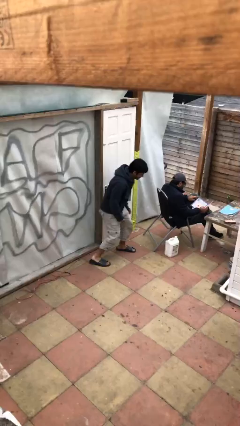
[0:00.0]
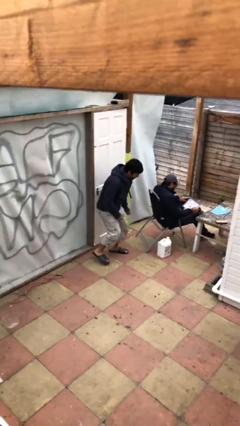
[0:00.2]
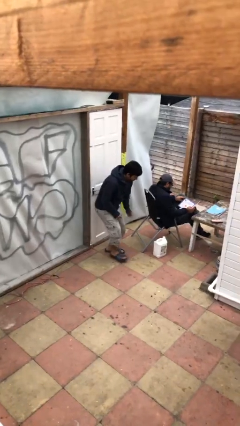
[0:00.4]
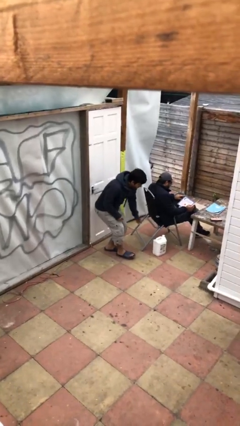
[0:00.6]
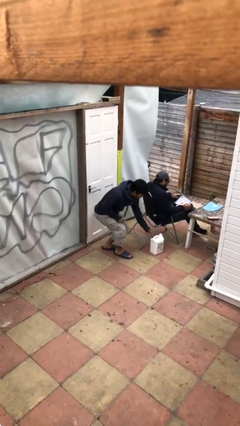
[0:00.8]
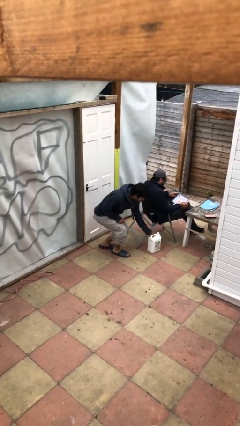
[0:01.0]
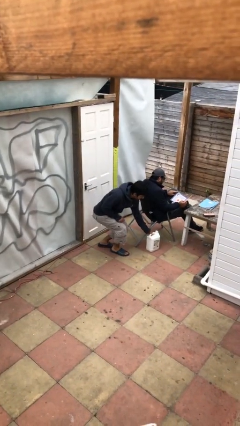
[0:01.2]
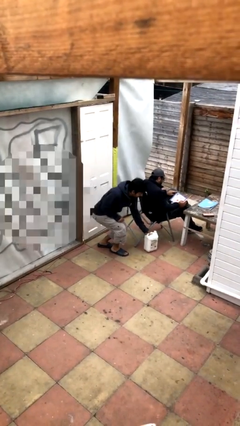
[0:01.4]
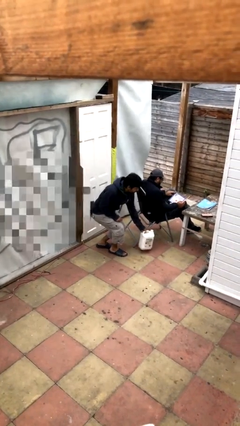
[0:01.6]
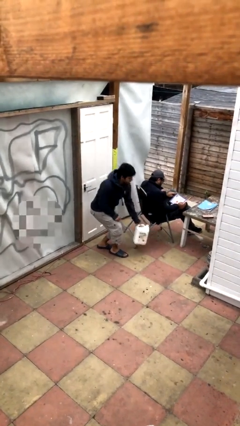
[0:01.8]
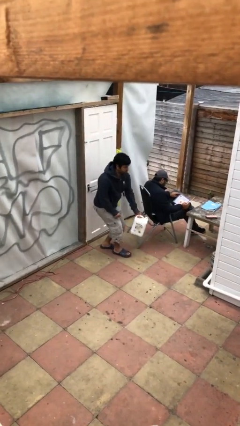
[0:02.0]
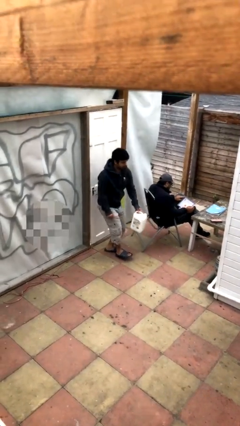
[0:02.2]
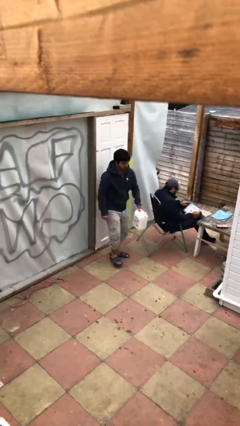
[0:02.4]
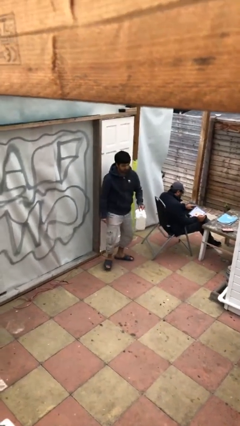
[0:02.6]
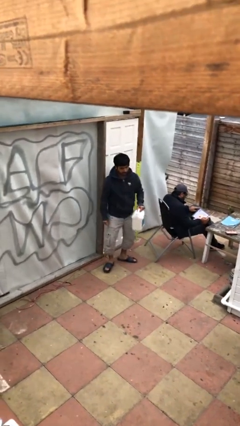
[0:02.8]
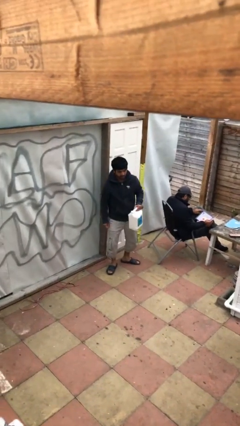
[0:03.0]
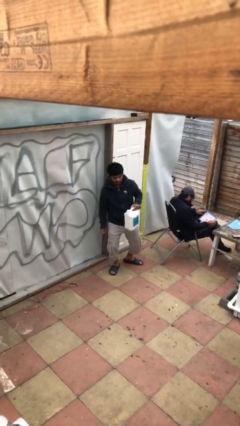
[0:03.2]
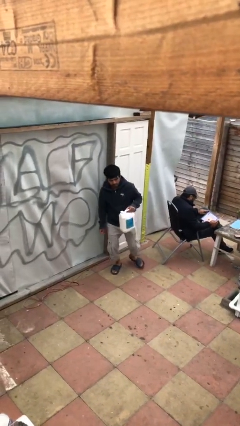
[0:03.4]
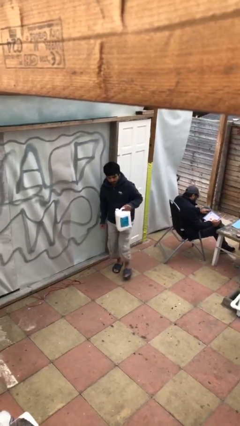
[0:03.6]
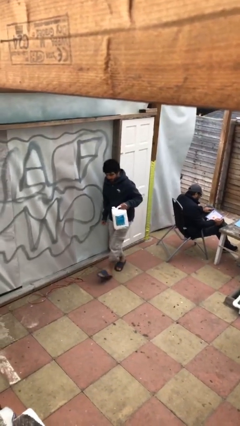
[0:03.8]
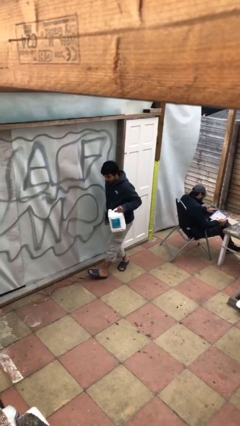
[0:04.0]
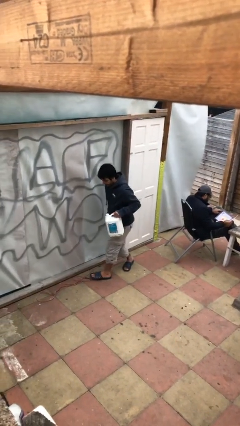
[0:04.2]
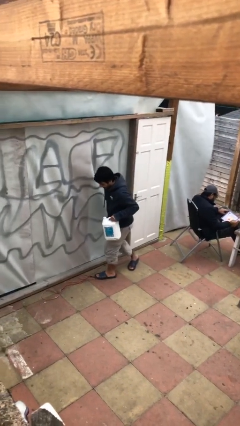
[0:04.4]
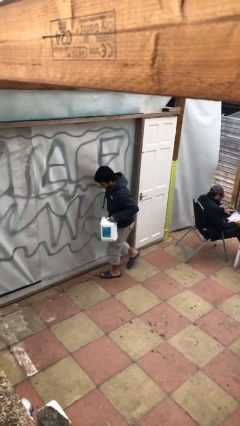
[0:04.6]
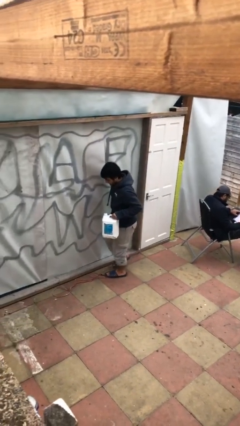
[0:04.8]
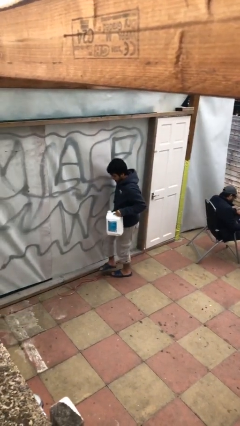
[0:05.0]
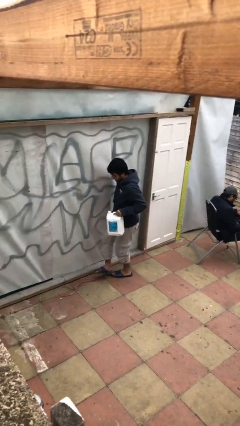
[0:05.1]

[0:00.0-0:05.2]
person steals object from person

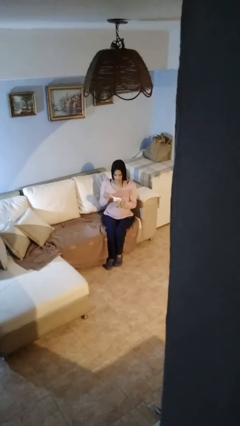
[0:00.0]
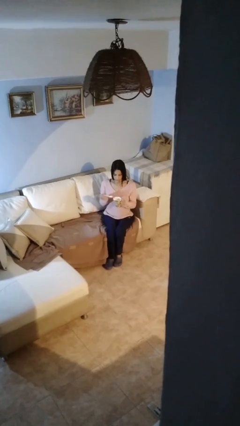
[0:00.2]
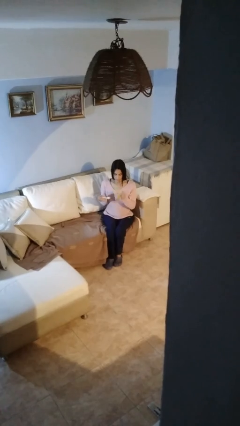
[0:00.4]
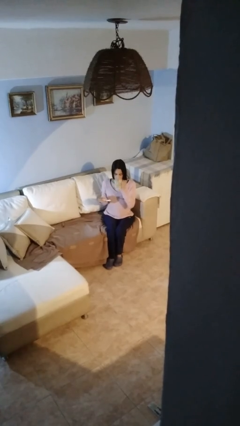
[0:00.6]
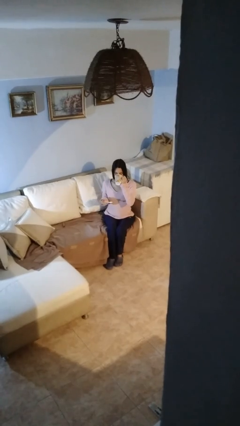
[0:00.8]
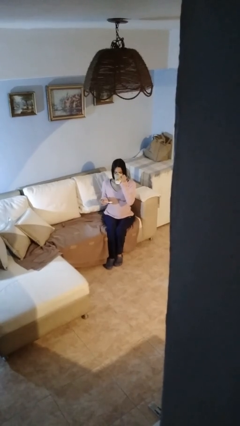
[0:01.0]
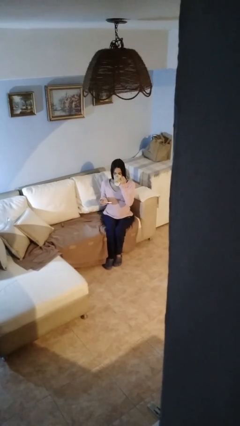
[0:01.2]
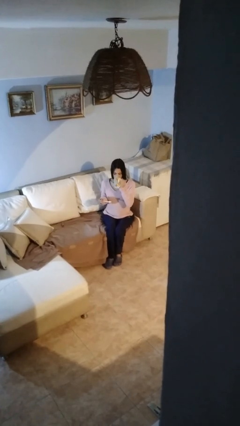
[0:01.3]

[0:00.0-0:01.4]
person drinks from mug

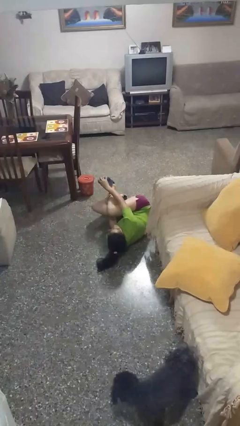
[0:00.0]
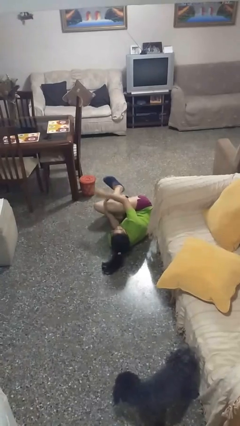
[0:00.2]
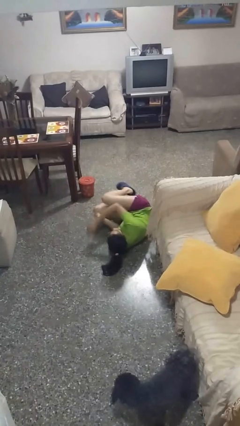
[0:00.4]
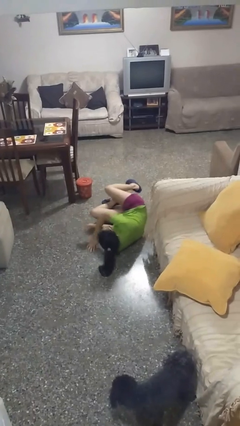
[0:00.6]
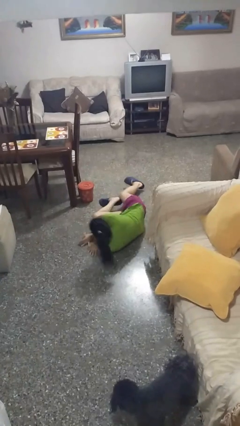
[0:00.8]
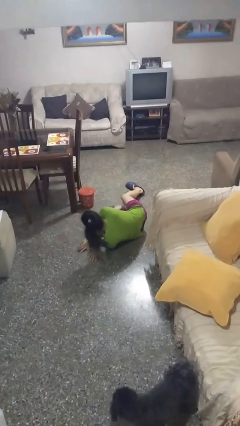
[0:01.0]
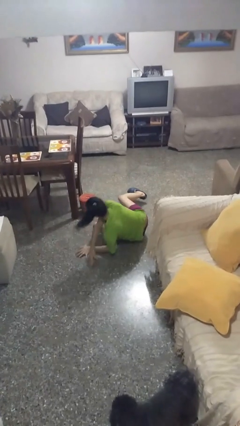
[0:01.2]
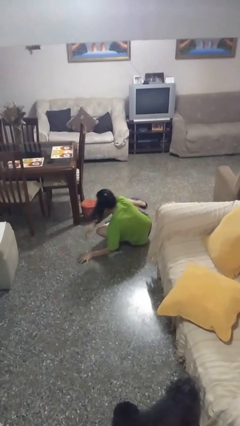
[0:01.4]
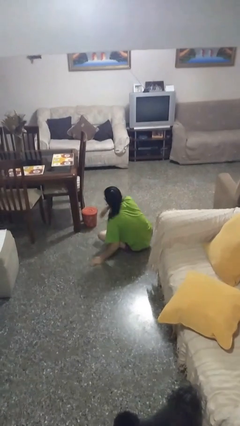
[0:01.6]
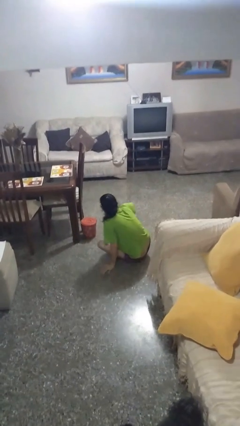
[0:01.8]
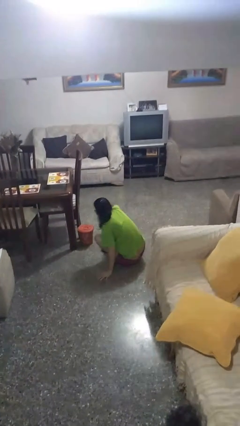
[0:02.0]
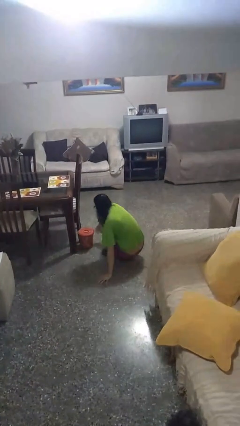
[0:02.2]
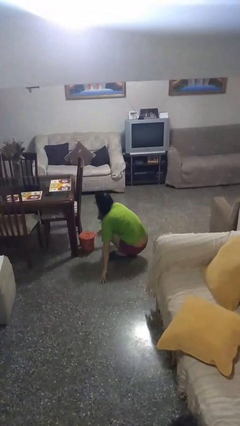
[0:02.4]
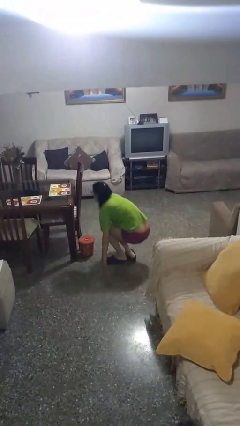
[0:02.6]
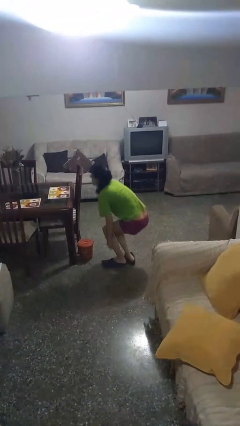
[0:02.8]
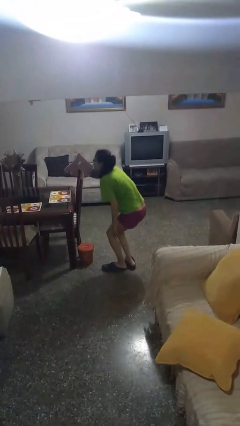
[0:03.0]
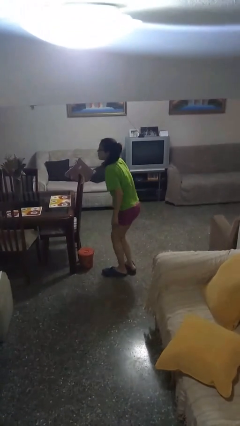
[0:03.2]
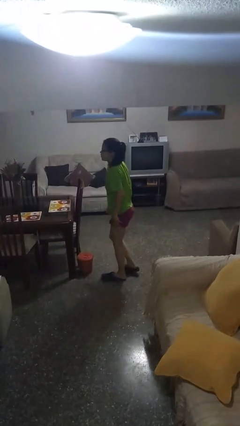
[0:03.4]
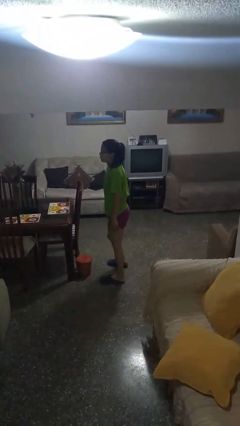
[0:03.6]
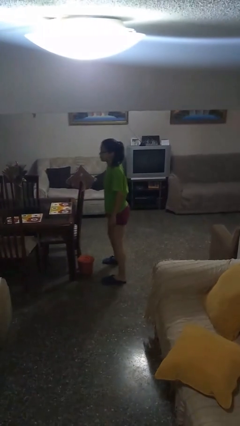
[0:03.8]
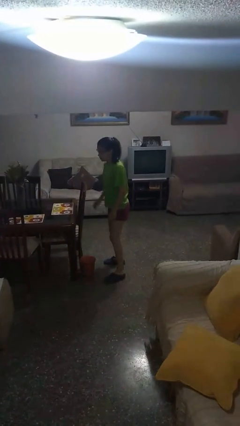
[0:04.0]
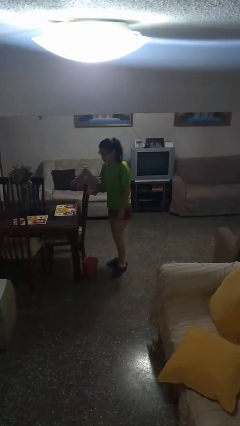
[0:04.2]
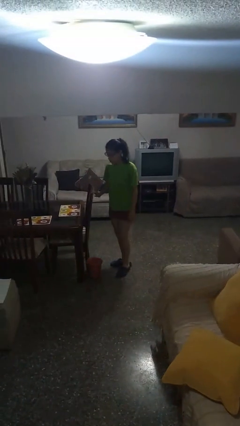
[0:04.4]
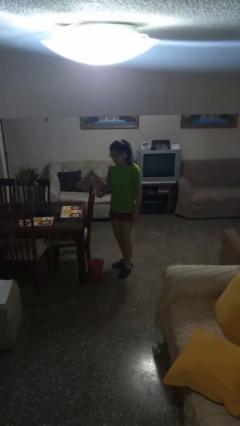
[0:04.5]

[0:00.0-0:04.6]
person stands up from floor

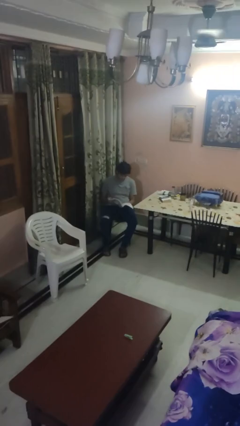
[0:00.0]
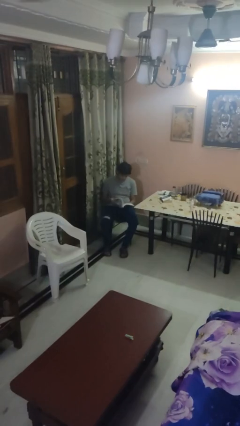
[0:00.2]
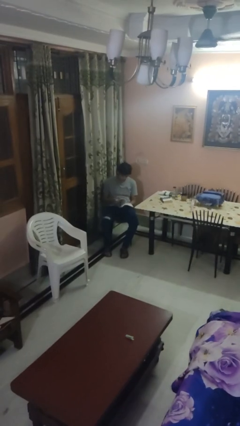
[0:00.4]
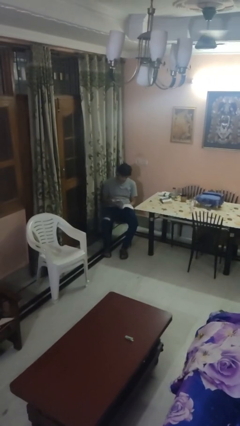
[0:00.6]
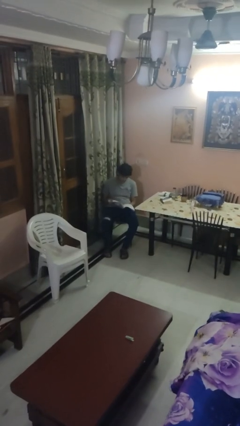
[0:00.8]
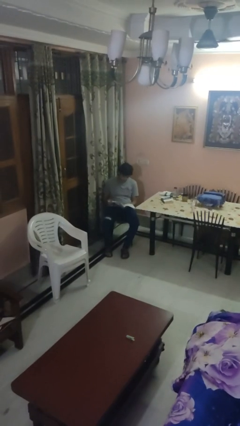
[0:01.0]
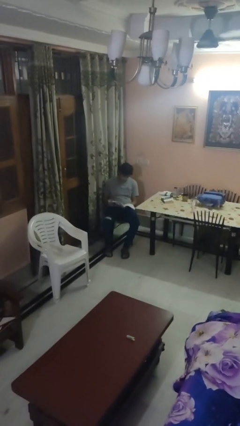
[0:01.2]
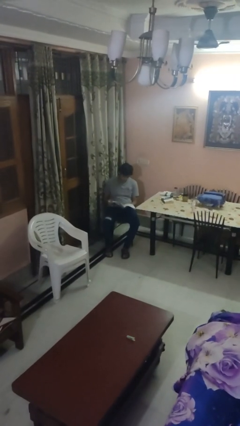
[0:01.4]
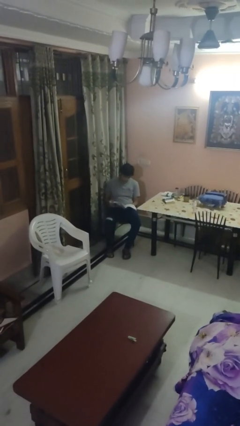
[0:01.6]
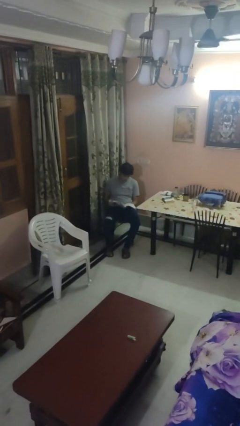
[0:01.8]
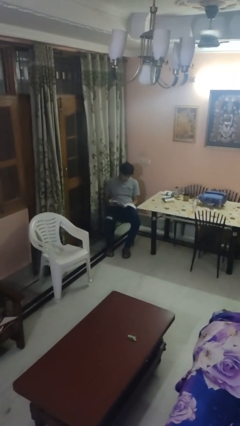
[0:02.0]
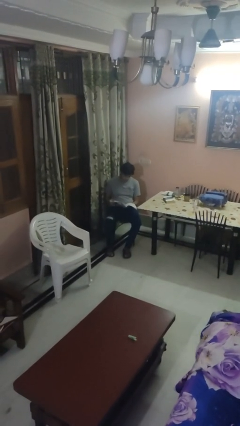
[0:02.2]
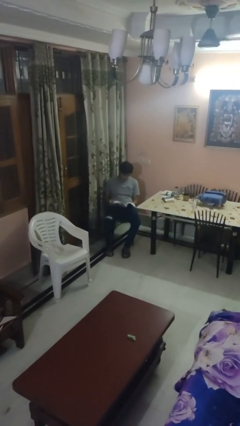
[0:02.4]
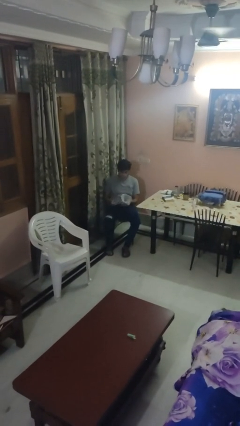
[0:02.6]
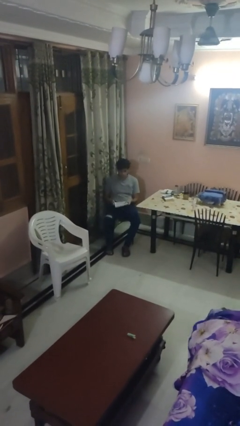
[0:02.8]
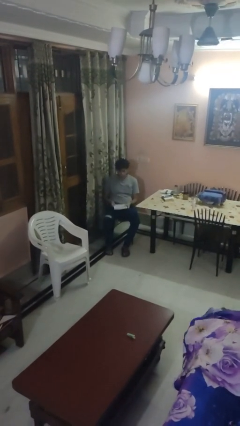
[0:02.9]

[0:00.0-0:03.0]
person reads magazine

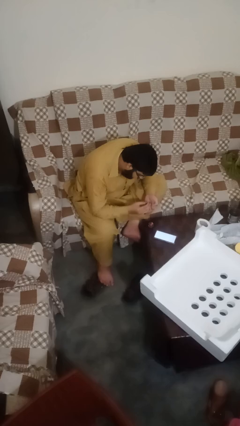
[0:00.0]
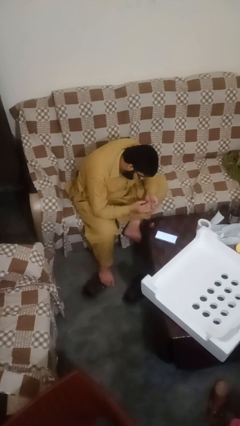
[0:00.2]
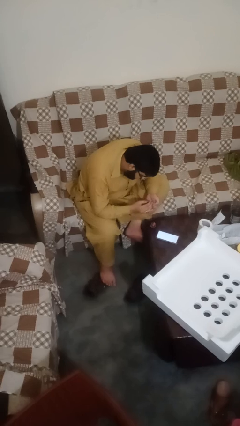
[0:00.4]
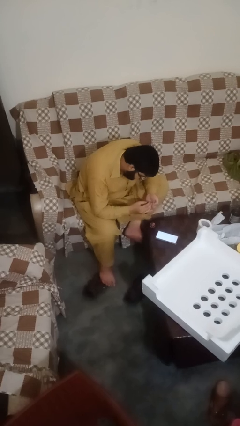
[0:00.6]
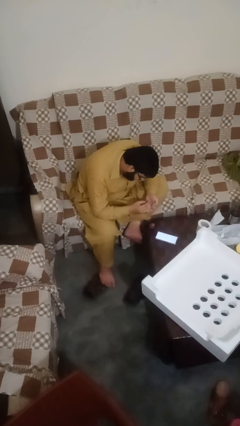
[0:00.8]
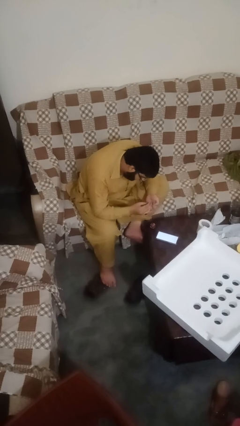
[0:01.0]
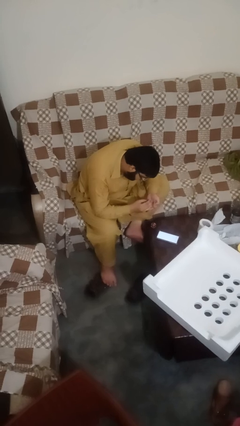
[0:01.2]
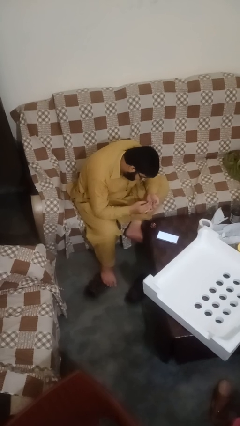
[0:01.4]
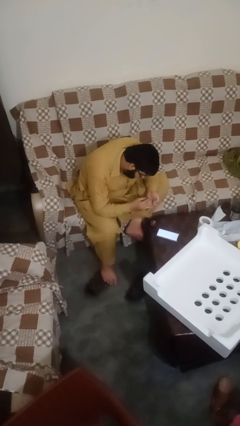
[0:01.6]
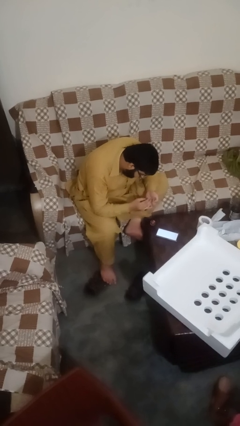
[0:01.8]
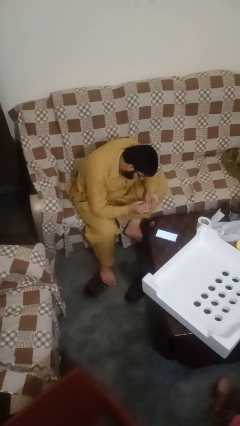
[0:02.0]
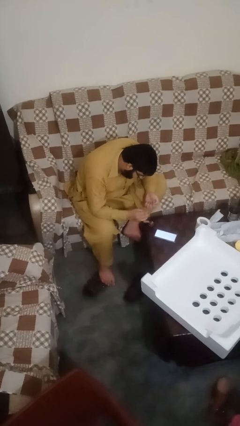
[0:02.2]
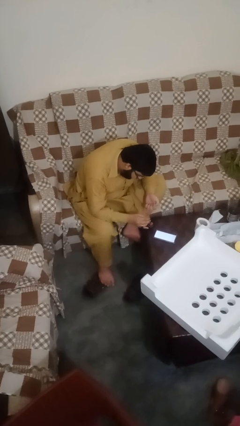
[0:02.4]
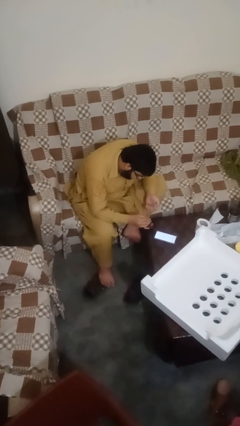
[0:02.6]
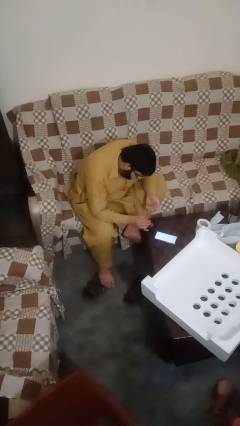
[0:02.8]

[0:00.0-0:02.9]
person paints fingernails

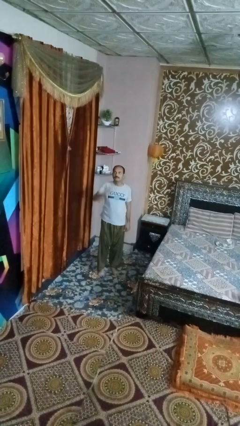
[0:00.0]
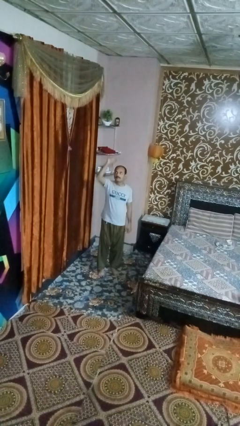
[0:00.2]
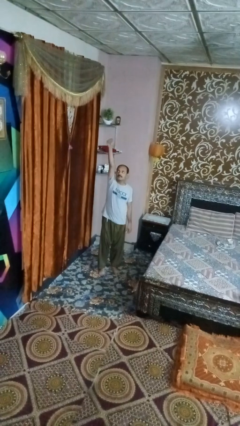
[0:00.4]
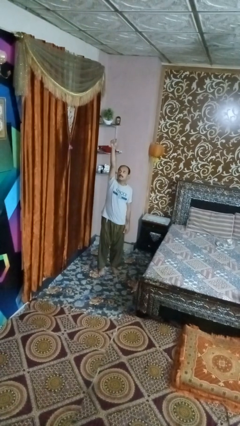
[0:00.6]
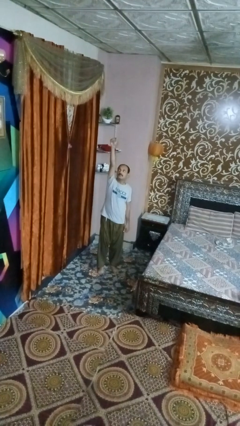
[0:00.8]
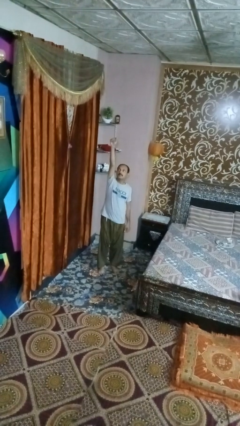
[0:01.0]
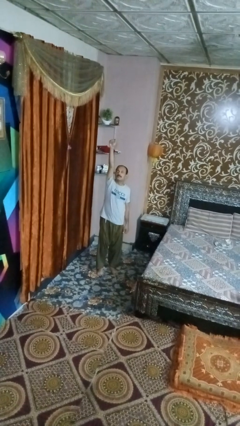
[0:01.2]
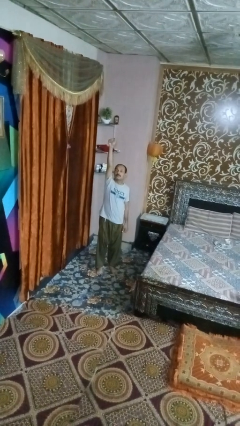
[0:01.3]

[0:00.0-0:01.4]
person punches
